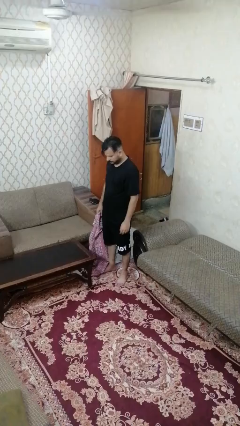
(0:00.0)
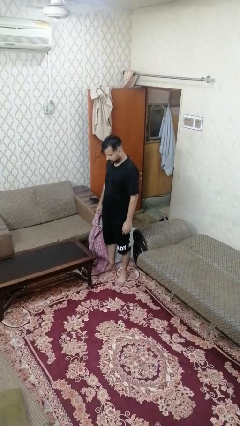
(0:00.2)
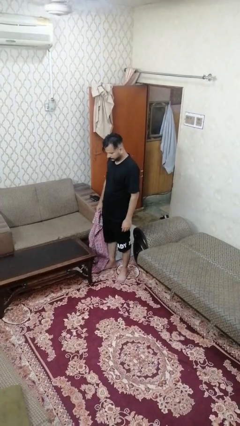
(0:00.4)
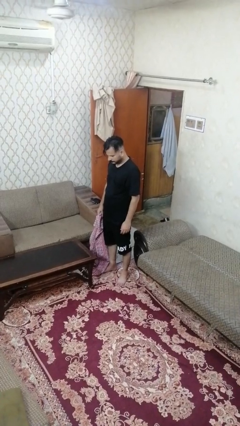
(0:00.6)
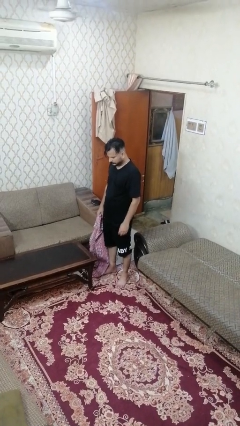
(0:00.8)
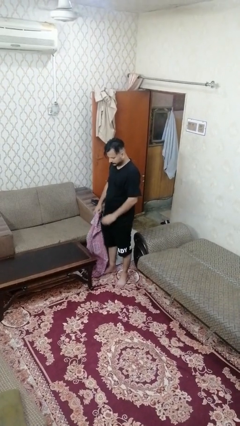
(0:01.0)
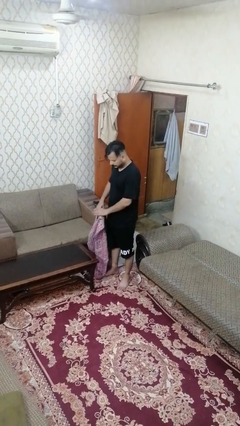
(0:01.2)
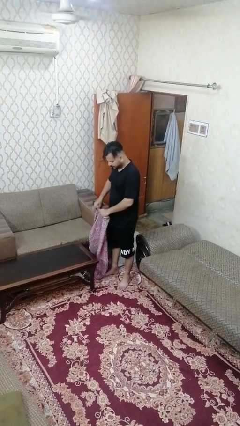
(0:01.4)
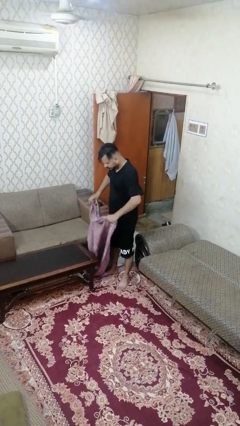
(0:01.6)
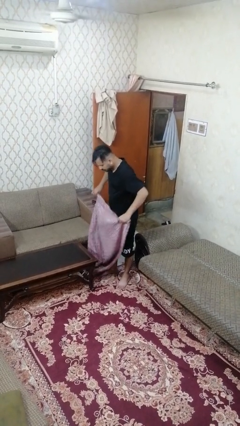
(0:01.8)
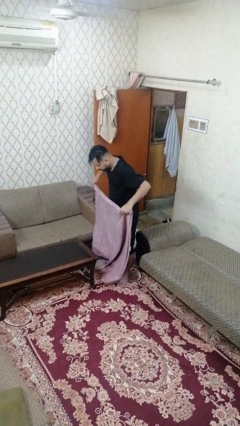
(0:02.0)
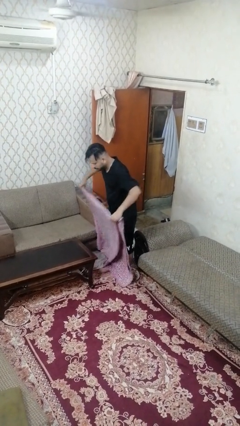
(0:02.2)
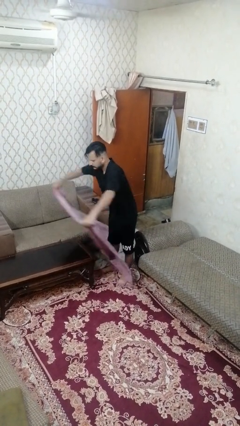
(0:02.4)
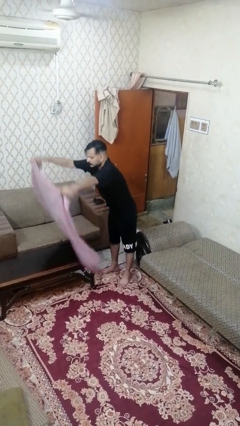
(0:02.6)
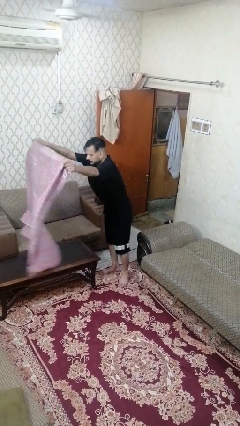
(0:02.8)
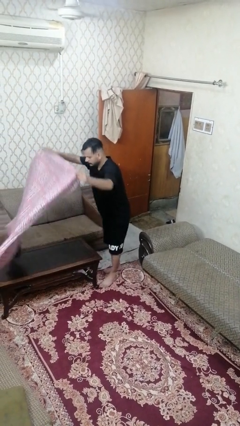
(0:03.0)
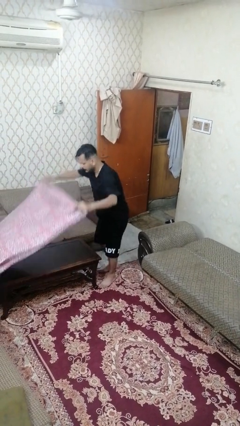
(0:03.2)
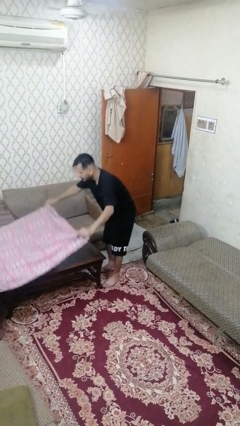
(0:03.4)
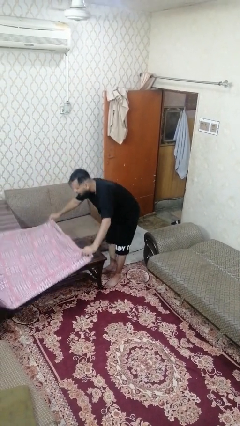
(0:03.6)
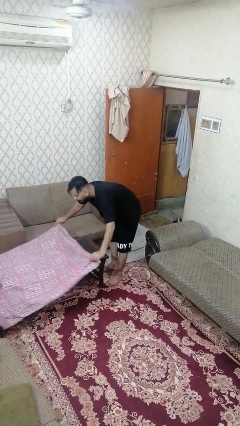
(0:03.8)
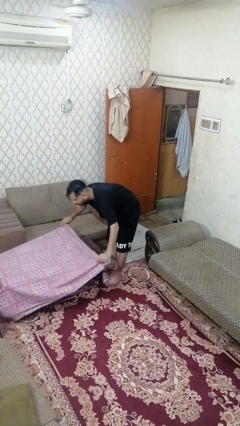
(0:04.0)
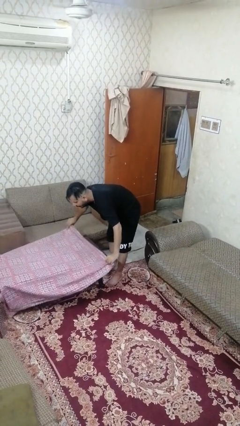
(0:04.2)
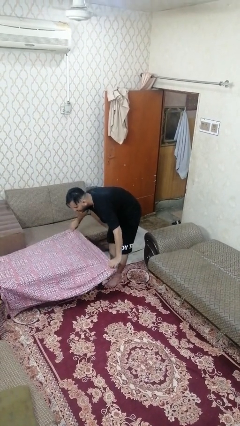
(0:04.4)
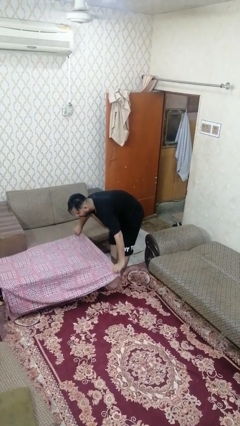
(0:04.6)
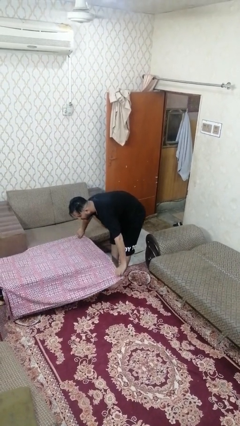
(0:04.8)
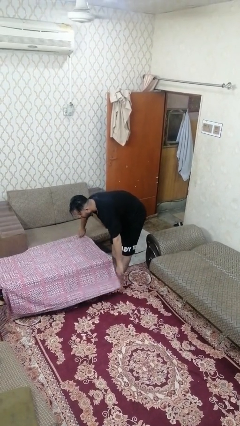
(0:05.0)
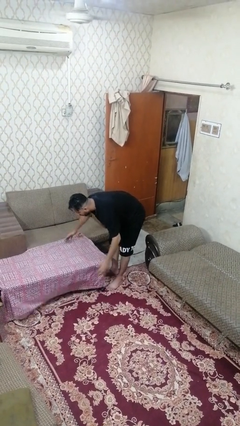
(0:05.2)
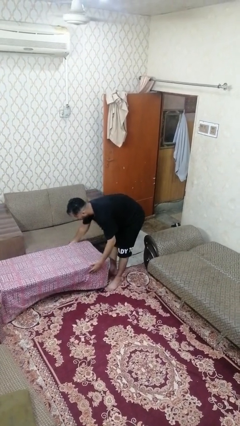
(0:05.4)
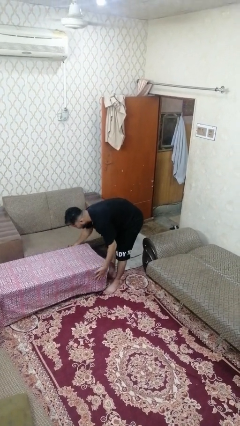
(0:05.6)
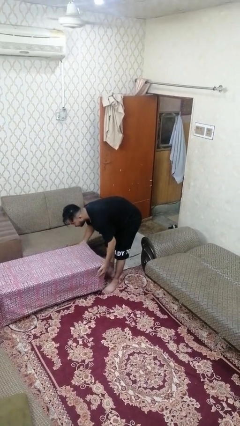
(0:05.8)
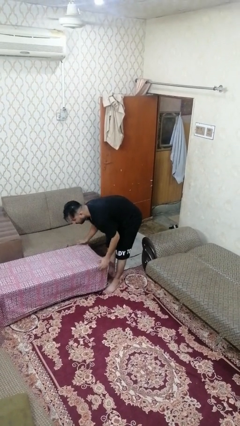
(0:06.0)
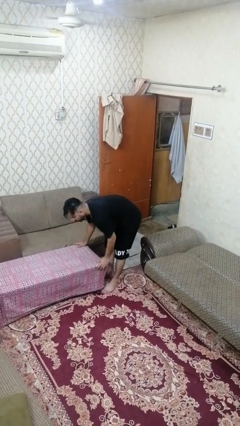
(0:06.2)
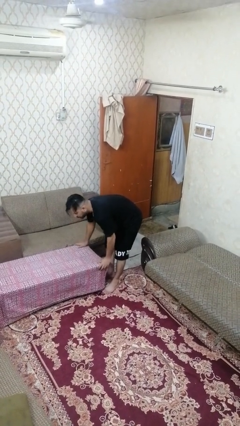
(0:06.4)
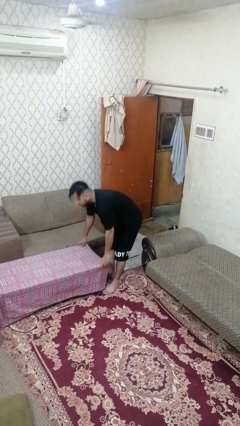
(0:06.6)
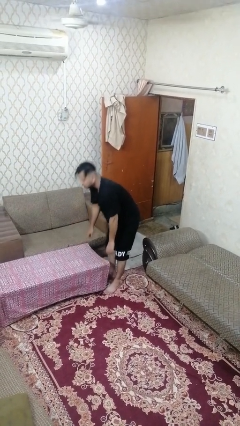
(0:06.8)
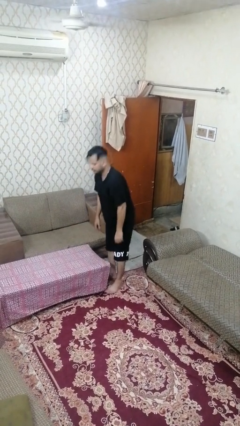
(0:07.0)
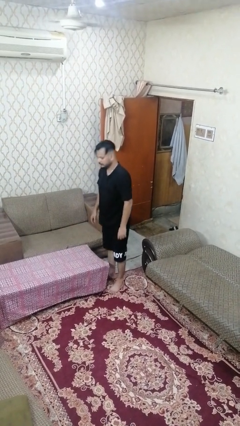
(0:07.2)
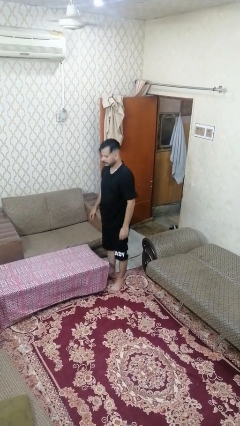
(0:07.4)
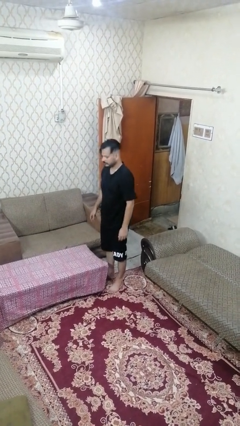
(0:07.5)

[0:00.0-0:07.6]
person spreads tablecloth

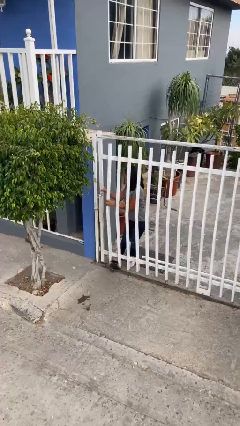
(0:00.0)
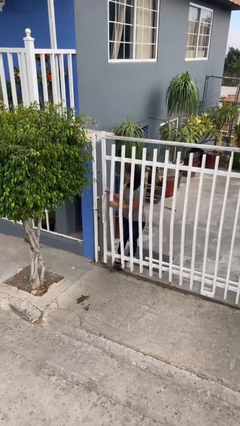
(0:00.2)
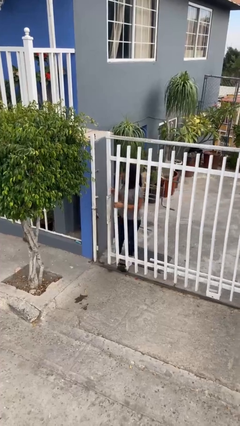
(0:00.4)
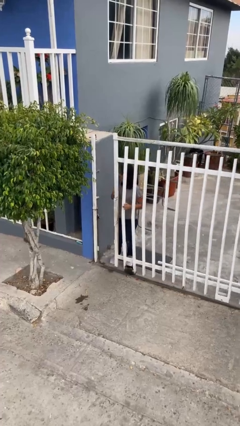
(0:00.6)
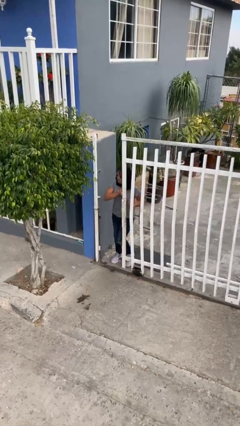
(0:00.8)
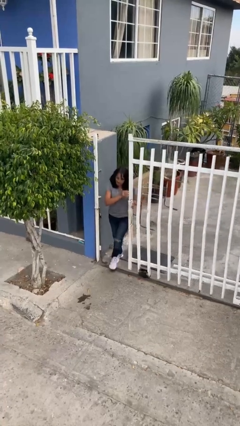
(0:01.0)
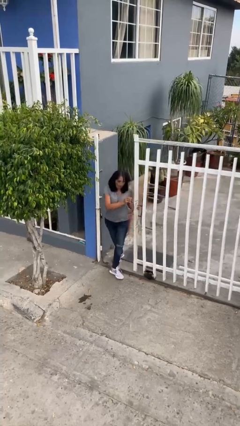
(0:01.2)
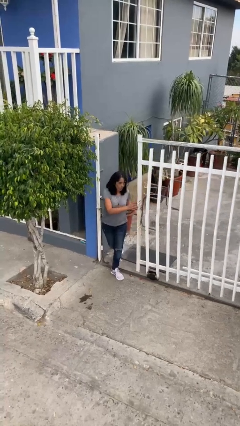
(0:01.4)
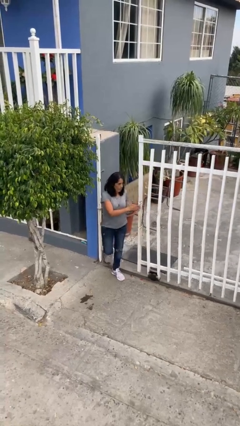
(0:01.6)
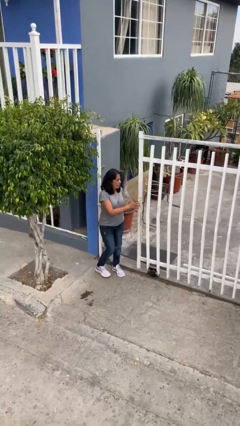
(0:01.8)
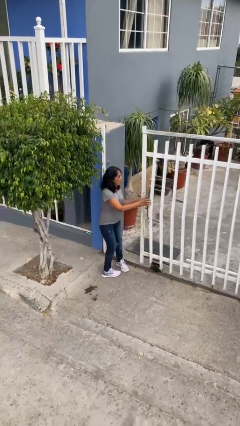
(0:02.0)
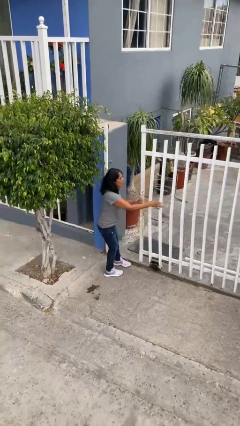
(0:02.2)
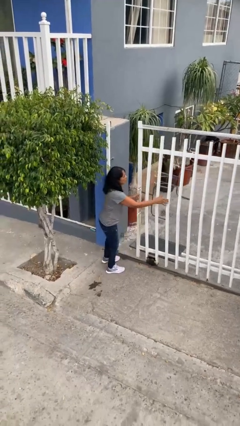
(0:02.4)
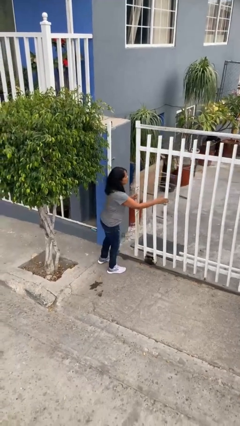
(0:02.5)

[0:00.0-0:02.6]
person opens facility door

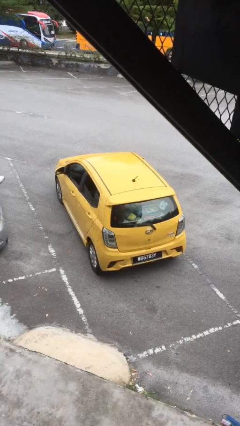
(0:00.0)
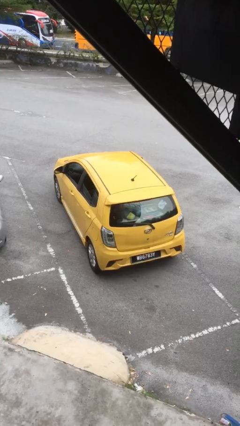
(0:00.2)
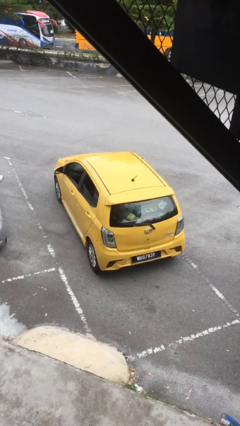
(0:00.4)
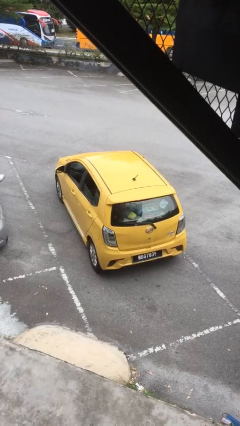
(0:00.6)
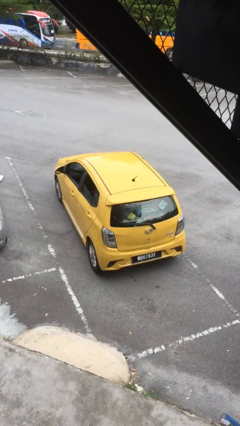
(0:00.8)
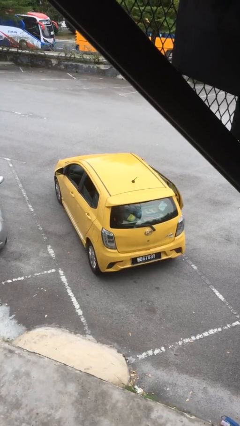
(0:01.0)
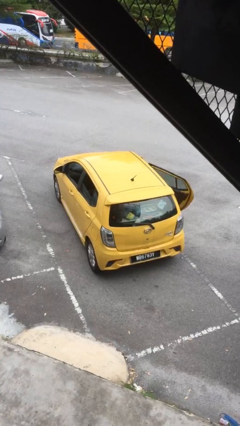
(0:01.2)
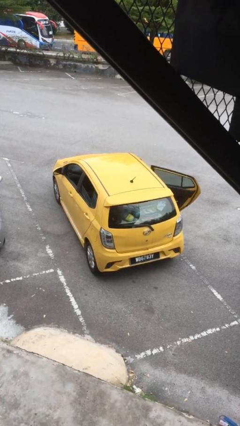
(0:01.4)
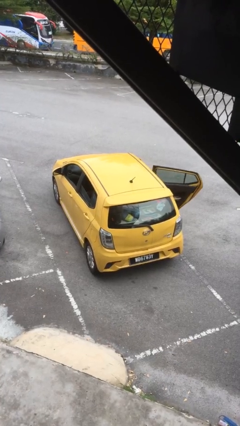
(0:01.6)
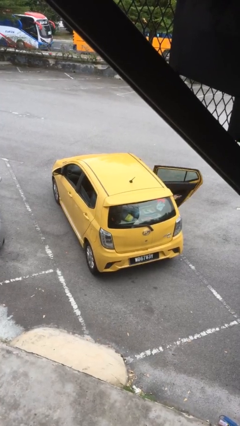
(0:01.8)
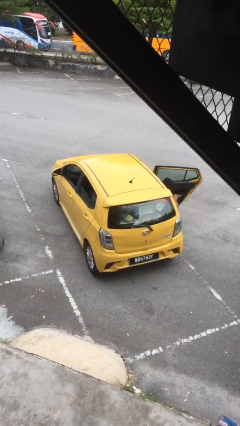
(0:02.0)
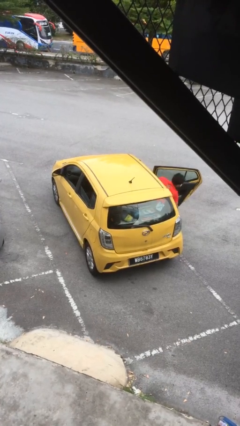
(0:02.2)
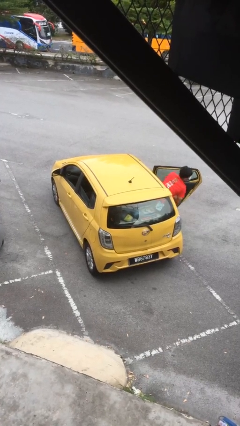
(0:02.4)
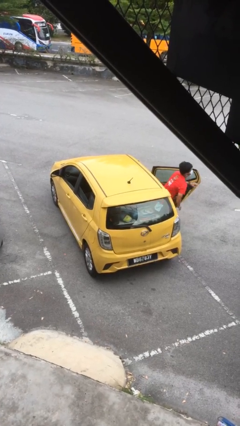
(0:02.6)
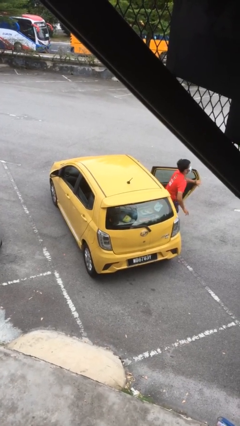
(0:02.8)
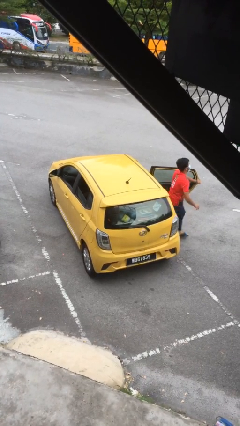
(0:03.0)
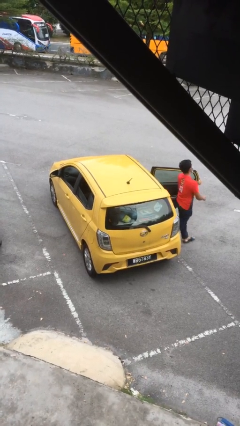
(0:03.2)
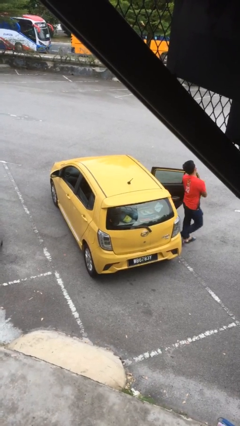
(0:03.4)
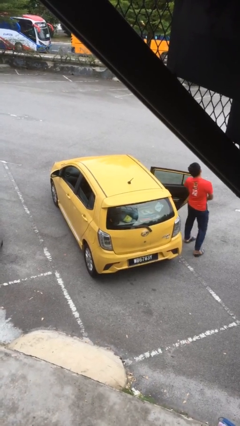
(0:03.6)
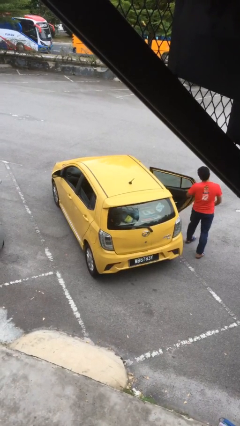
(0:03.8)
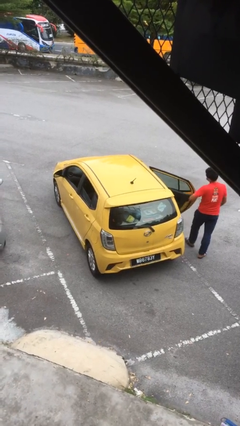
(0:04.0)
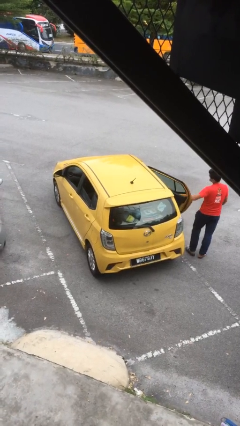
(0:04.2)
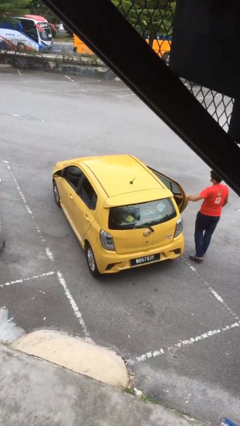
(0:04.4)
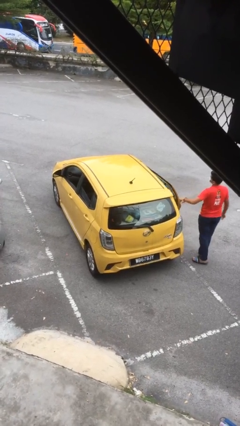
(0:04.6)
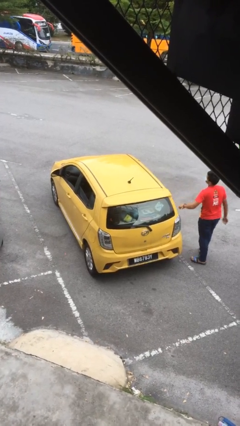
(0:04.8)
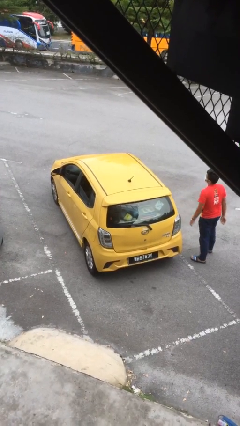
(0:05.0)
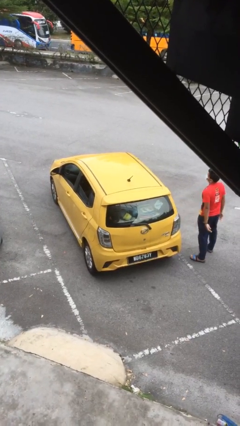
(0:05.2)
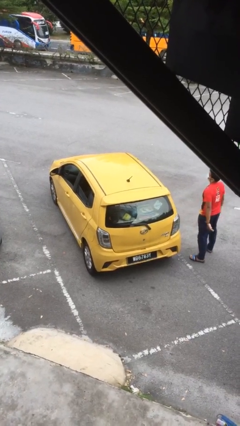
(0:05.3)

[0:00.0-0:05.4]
car drops off person

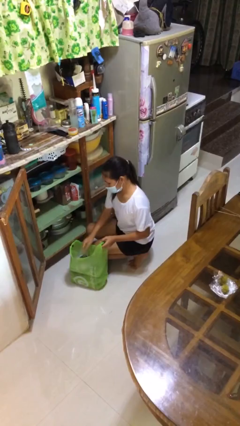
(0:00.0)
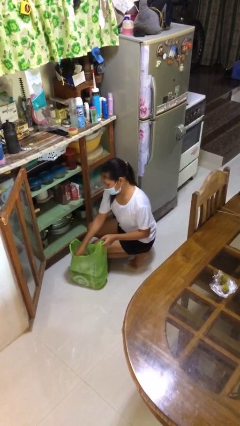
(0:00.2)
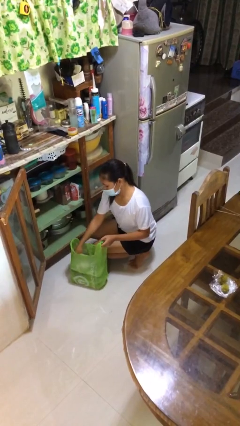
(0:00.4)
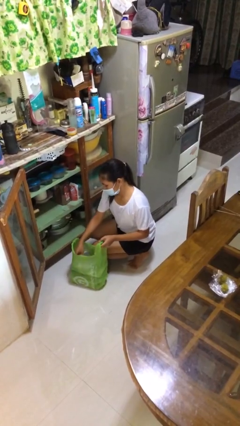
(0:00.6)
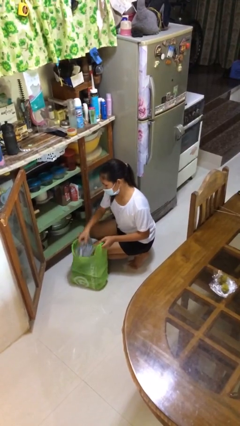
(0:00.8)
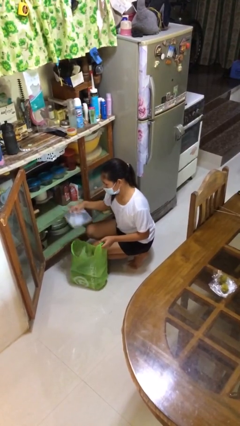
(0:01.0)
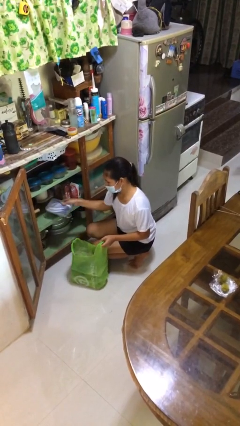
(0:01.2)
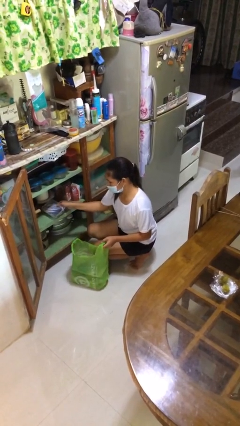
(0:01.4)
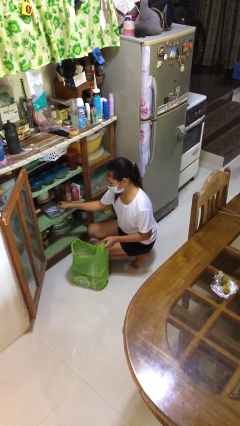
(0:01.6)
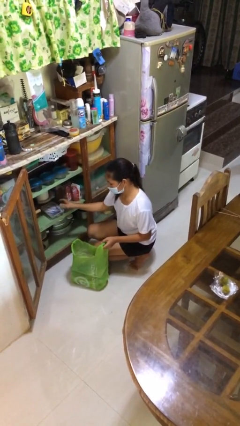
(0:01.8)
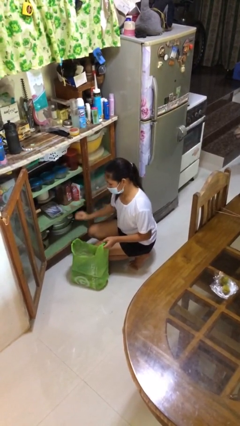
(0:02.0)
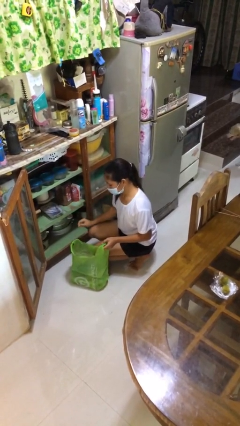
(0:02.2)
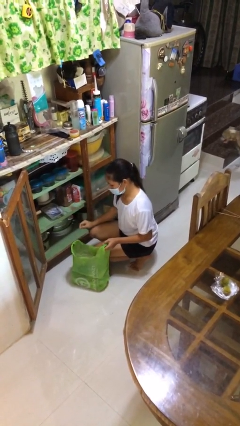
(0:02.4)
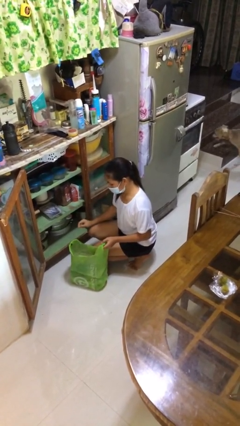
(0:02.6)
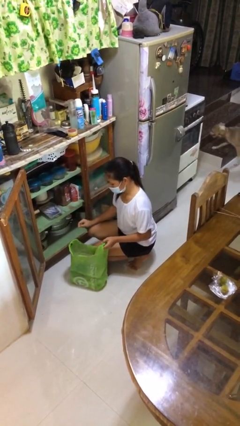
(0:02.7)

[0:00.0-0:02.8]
person loads groceries into cabinet
